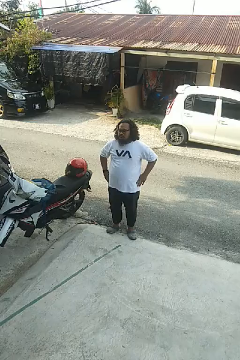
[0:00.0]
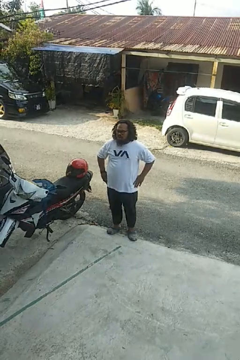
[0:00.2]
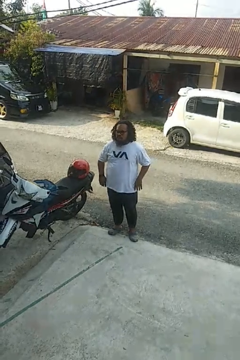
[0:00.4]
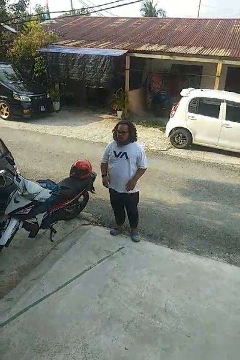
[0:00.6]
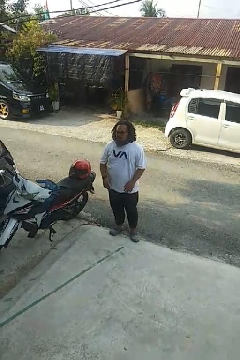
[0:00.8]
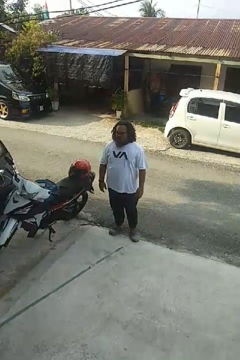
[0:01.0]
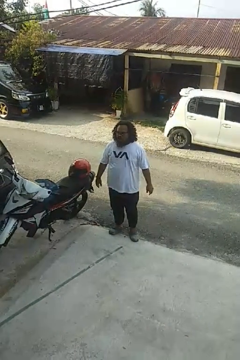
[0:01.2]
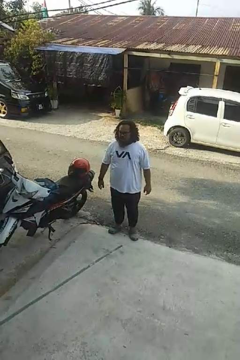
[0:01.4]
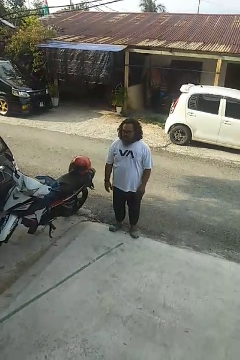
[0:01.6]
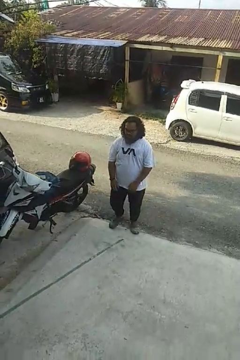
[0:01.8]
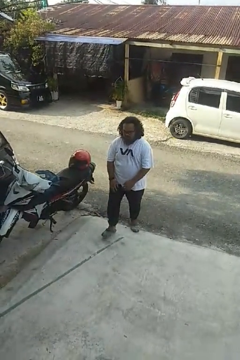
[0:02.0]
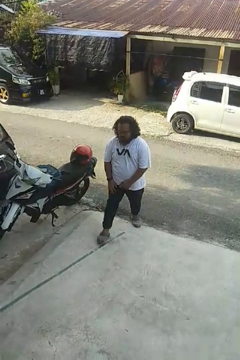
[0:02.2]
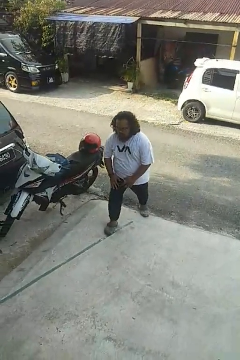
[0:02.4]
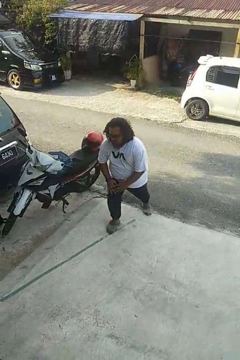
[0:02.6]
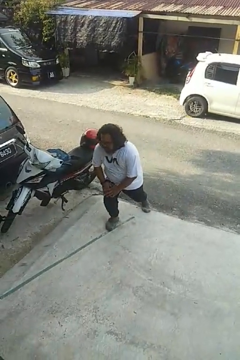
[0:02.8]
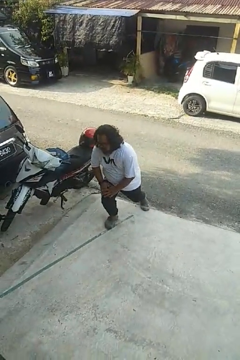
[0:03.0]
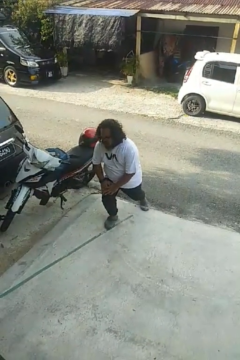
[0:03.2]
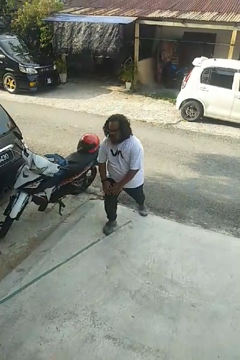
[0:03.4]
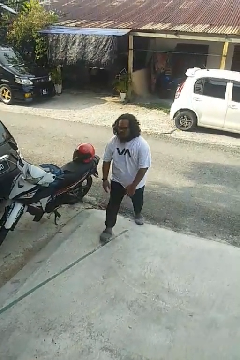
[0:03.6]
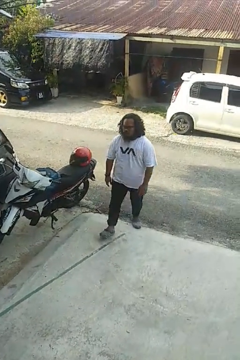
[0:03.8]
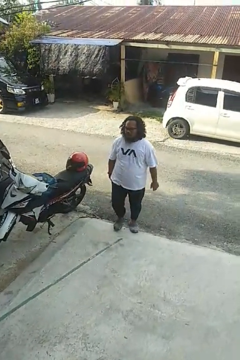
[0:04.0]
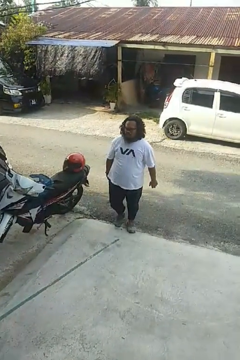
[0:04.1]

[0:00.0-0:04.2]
person exercises with lunges

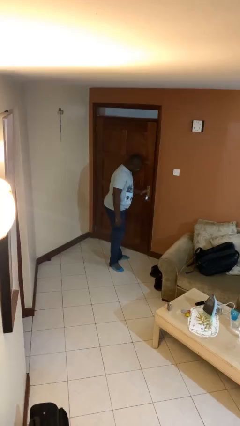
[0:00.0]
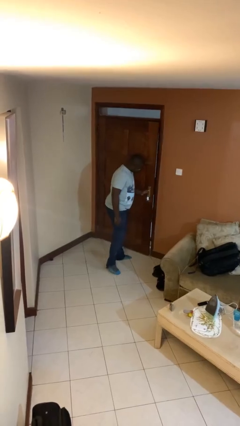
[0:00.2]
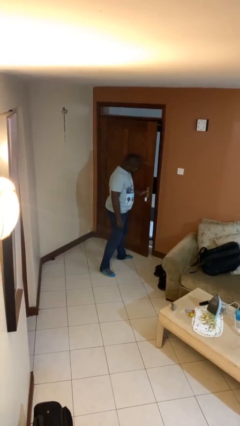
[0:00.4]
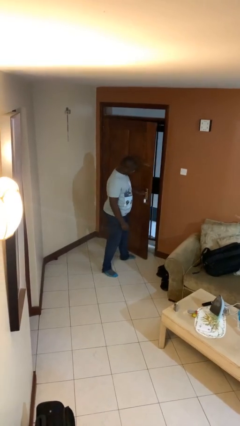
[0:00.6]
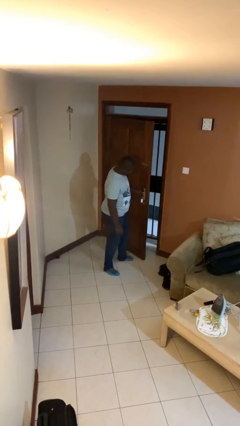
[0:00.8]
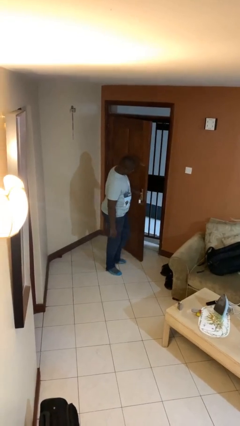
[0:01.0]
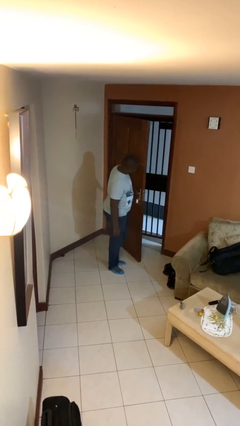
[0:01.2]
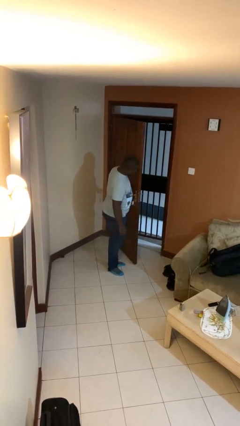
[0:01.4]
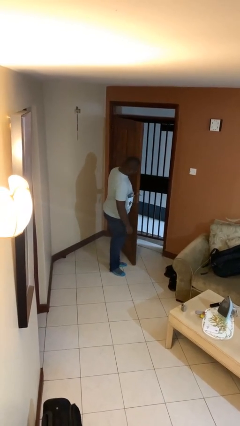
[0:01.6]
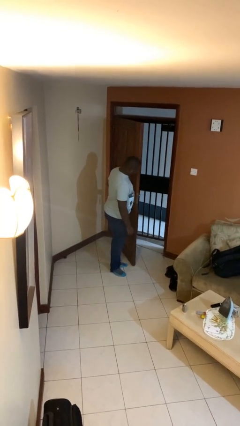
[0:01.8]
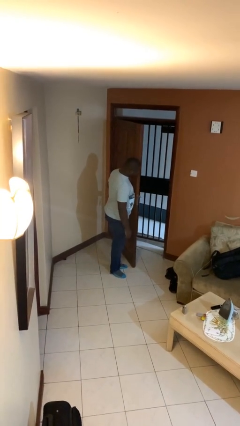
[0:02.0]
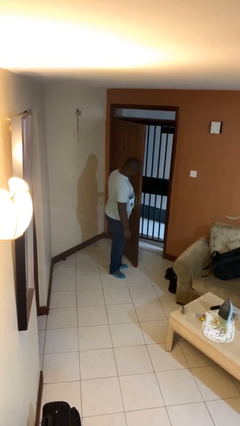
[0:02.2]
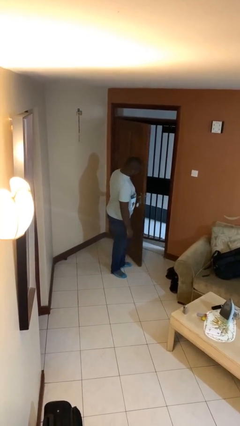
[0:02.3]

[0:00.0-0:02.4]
person opens facility door

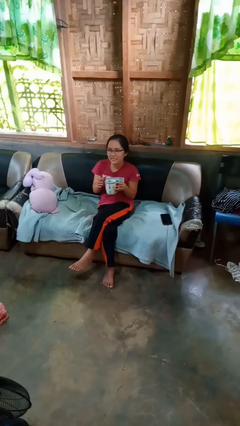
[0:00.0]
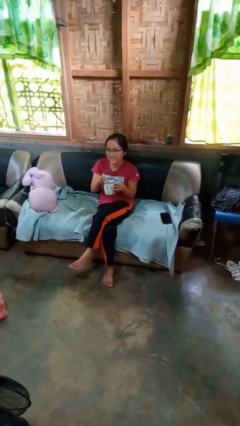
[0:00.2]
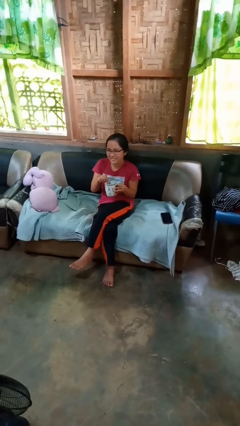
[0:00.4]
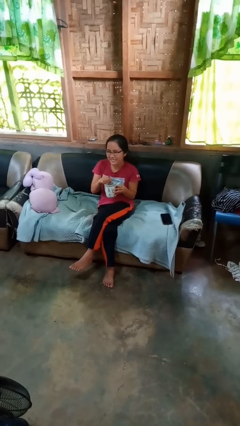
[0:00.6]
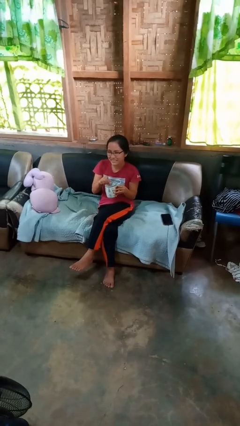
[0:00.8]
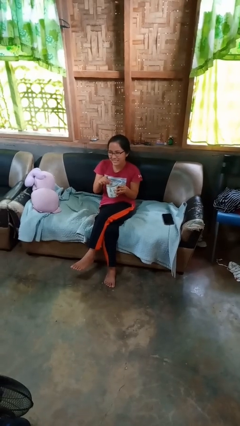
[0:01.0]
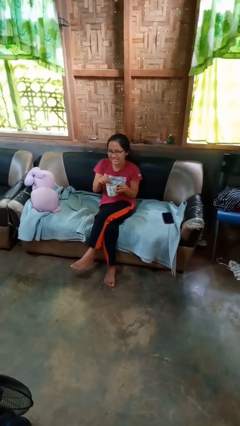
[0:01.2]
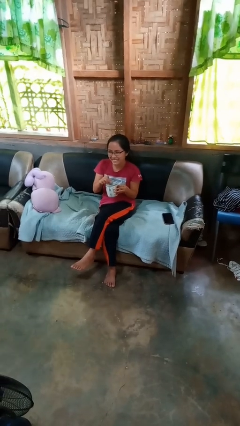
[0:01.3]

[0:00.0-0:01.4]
person stirs mug

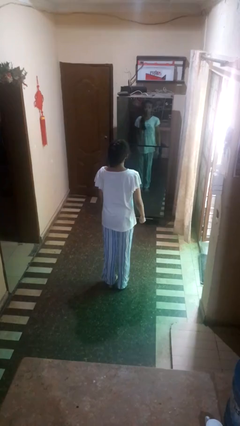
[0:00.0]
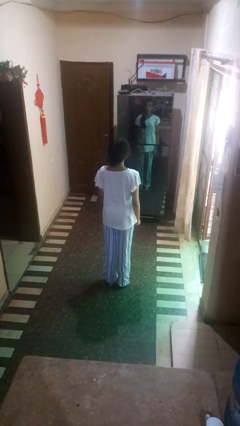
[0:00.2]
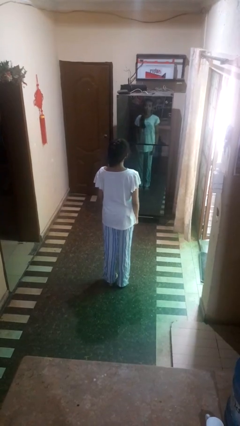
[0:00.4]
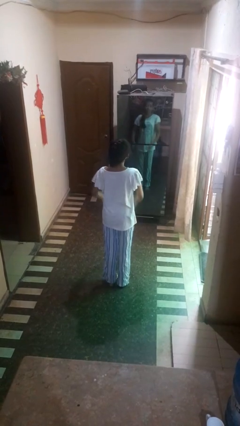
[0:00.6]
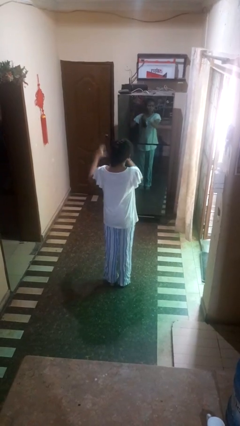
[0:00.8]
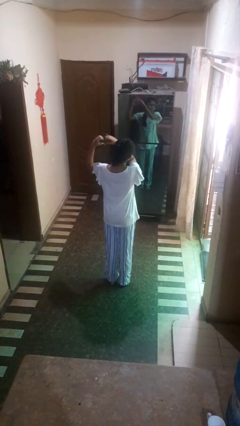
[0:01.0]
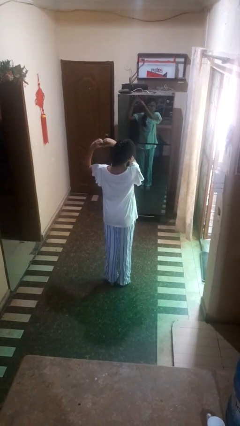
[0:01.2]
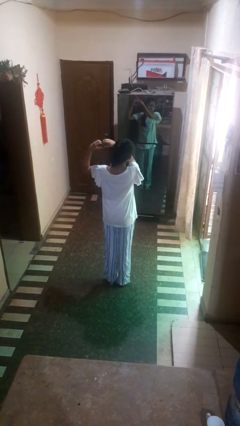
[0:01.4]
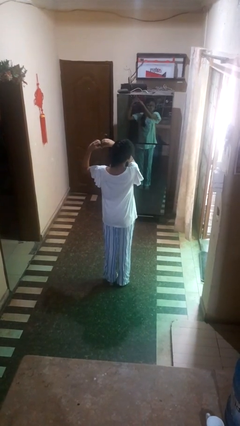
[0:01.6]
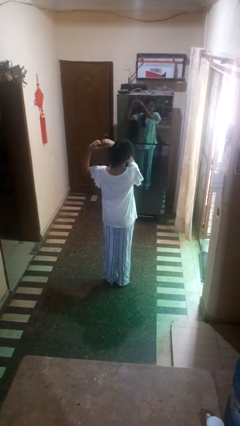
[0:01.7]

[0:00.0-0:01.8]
person gestures heart

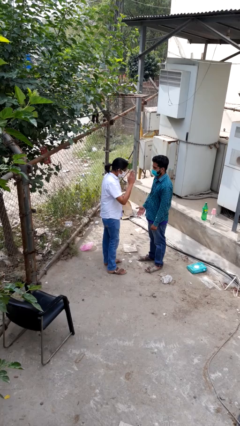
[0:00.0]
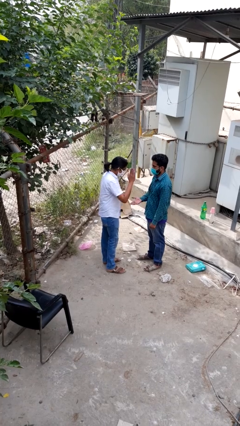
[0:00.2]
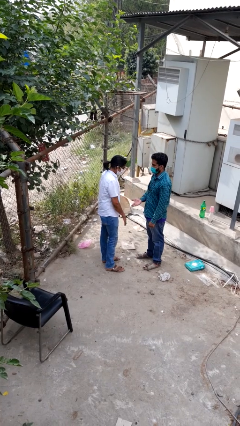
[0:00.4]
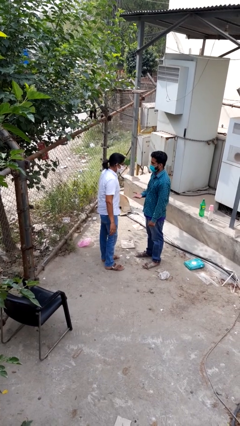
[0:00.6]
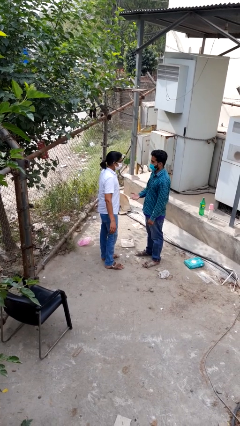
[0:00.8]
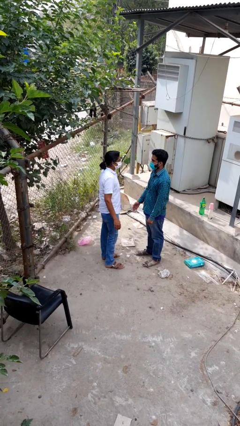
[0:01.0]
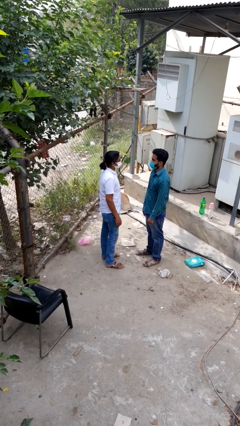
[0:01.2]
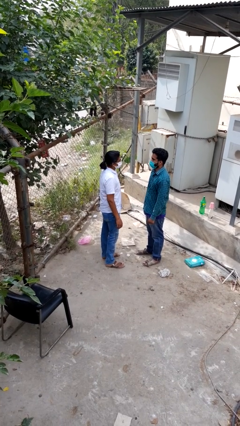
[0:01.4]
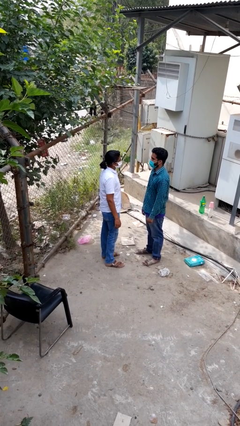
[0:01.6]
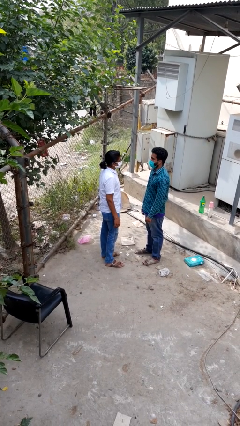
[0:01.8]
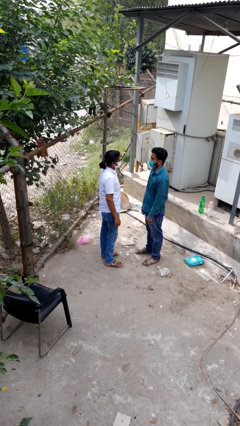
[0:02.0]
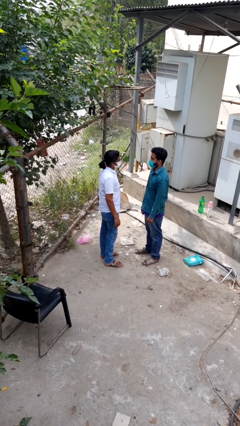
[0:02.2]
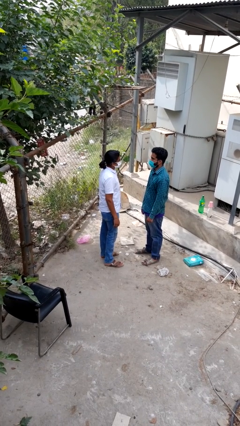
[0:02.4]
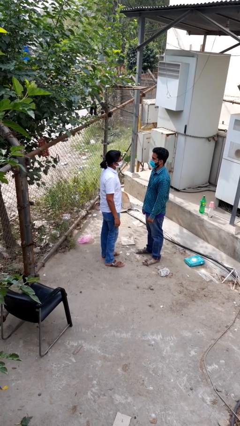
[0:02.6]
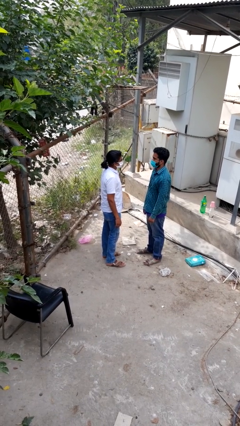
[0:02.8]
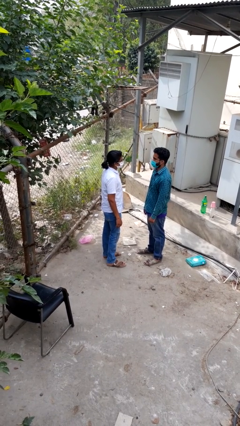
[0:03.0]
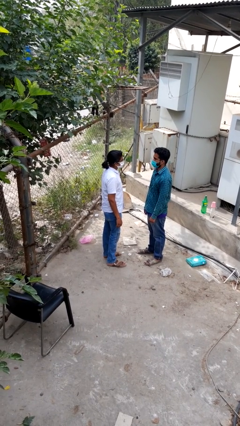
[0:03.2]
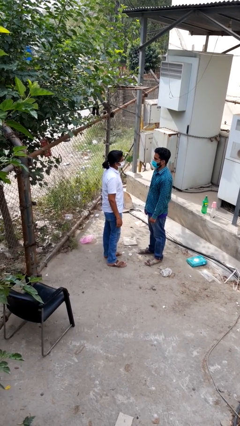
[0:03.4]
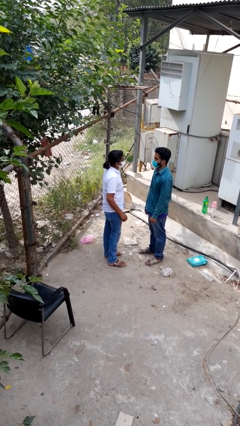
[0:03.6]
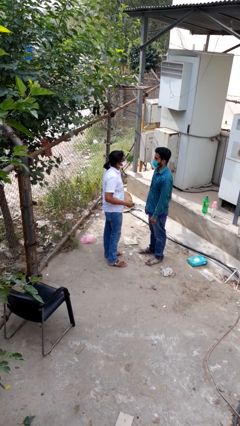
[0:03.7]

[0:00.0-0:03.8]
person highfives hand

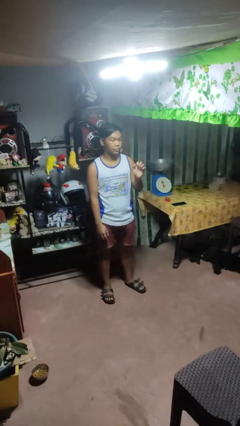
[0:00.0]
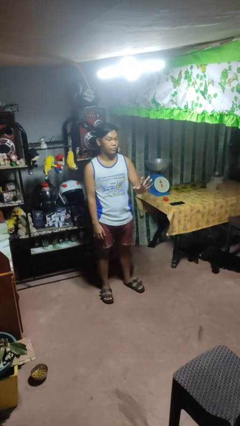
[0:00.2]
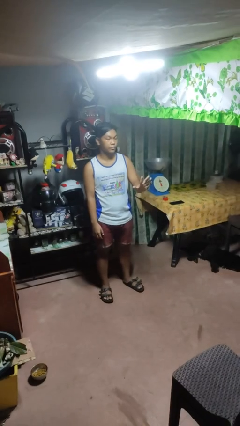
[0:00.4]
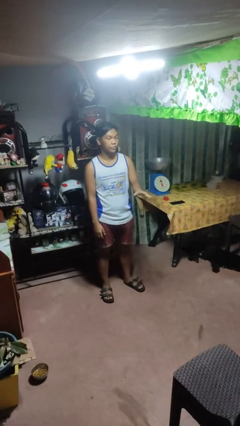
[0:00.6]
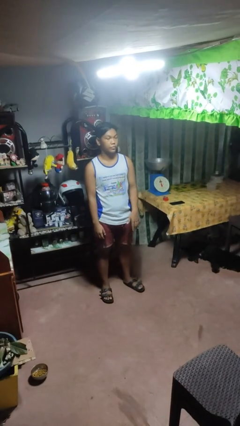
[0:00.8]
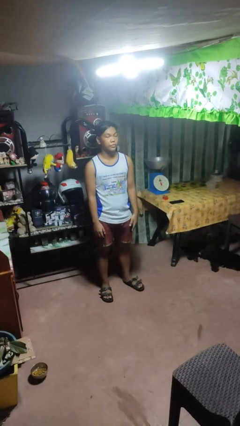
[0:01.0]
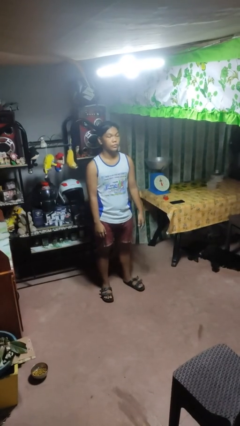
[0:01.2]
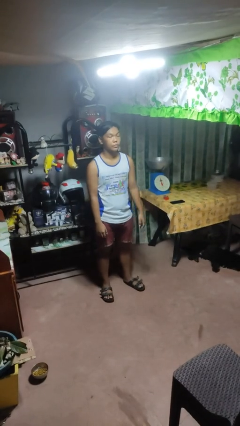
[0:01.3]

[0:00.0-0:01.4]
person gestures number five

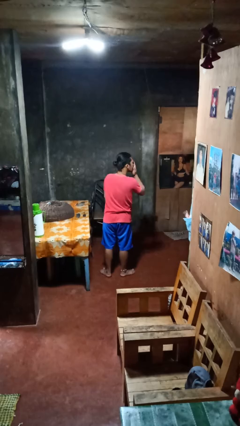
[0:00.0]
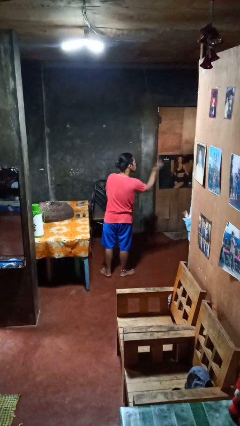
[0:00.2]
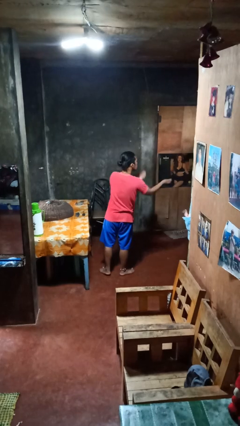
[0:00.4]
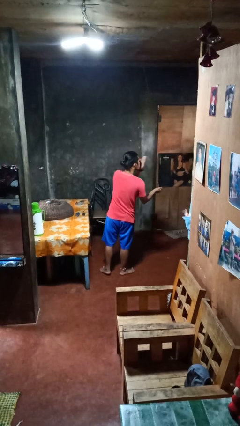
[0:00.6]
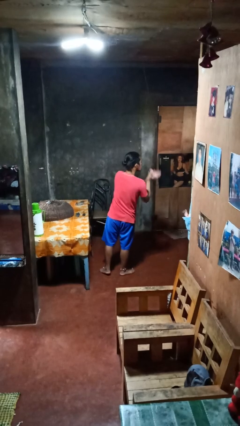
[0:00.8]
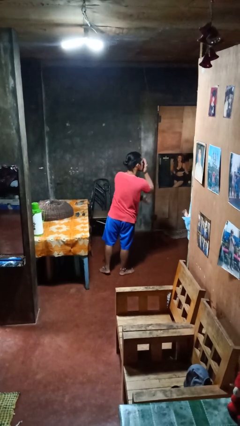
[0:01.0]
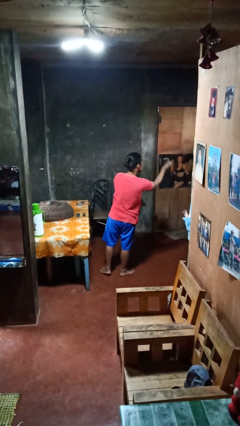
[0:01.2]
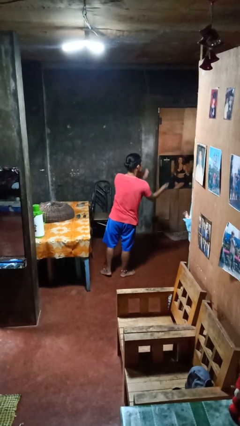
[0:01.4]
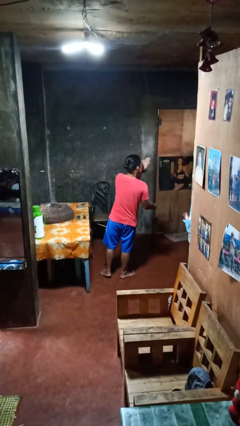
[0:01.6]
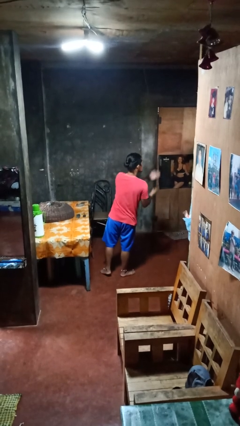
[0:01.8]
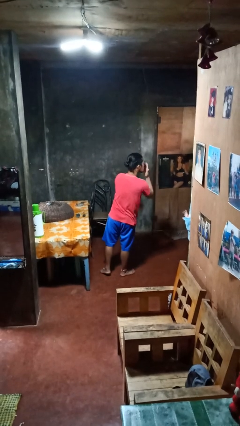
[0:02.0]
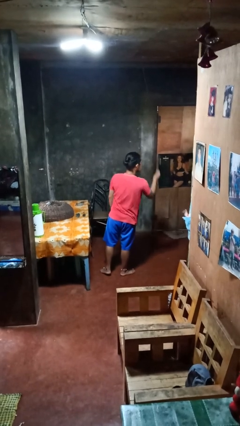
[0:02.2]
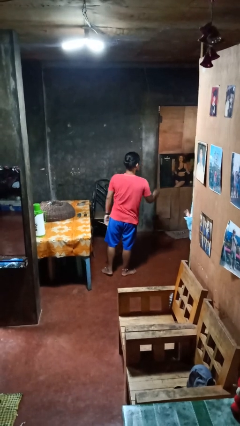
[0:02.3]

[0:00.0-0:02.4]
person gestures blow kiss

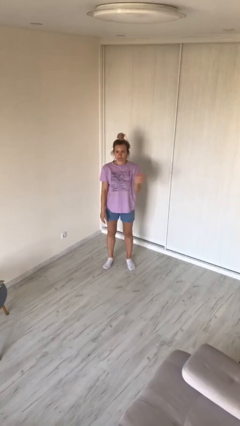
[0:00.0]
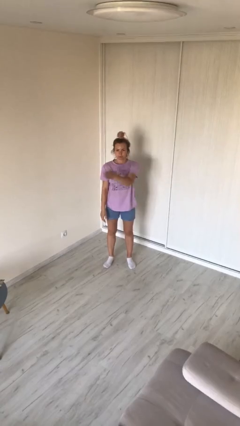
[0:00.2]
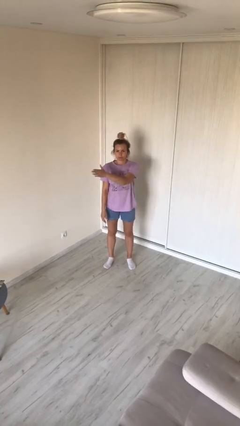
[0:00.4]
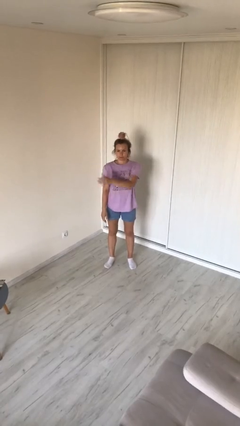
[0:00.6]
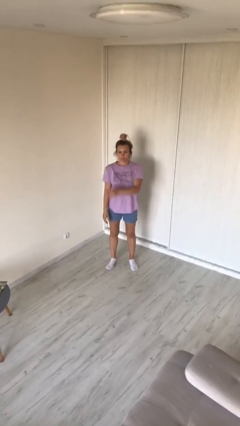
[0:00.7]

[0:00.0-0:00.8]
person gestures swipe right
